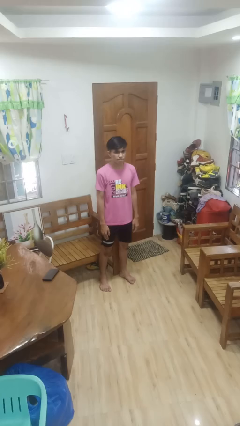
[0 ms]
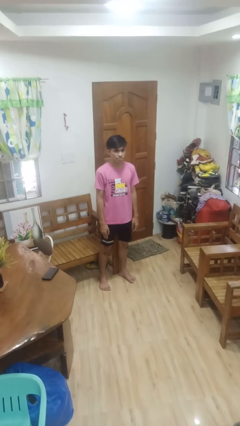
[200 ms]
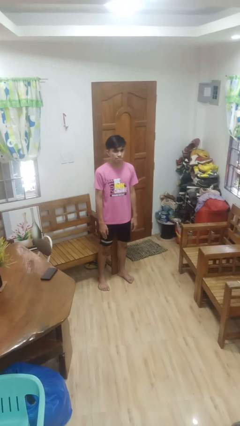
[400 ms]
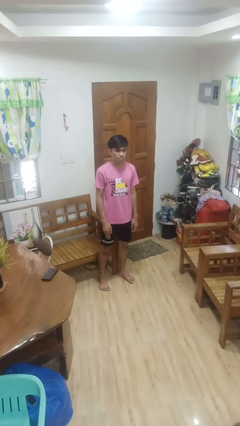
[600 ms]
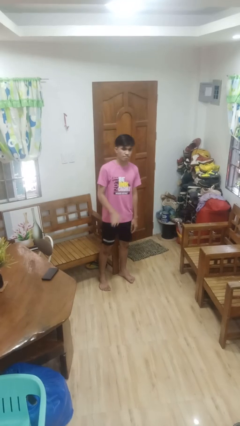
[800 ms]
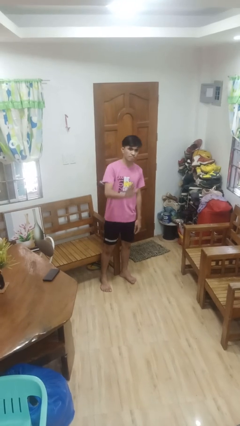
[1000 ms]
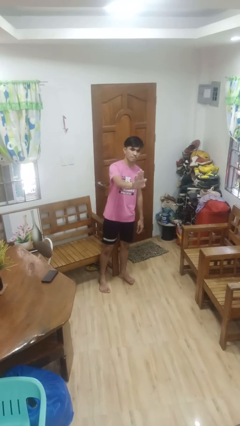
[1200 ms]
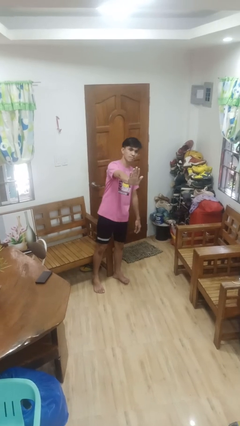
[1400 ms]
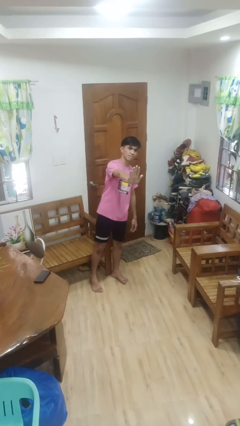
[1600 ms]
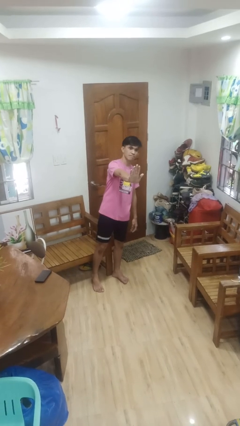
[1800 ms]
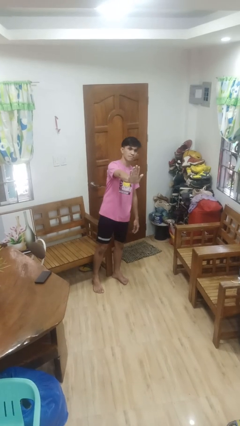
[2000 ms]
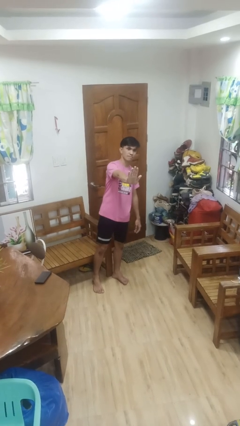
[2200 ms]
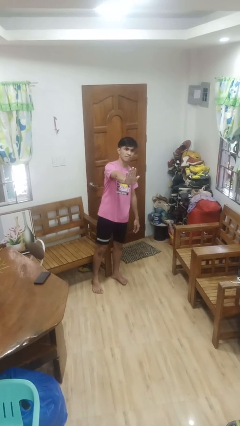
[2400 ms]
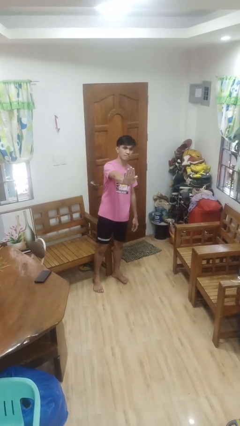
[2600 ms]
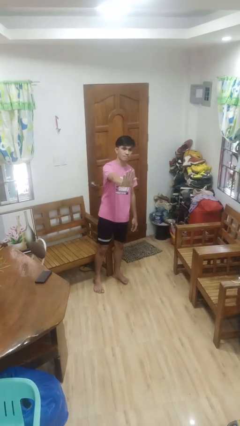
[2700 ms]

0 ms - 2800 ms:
person gestures stop

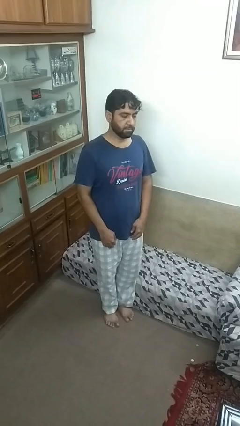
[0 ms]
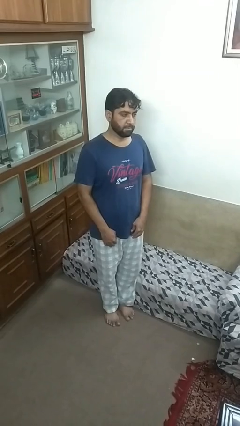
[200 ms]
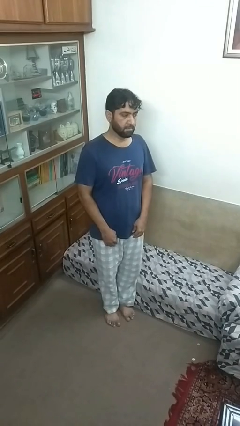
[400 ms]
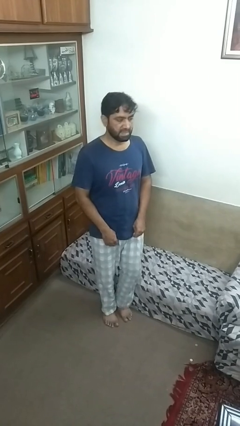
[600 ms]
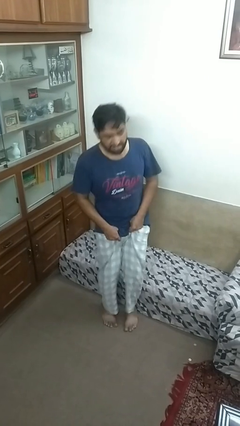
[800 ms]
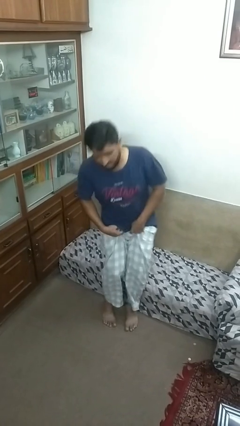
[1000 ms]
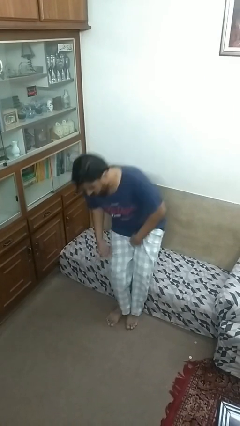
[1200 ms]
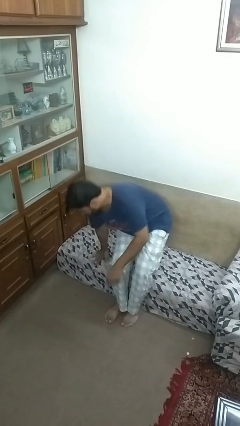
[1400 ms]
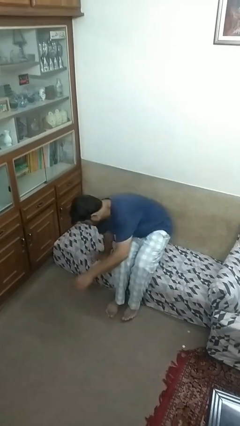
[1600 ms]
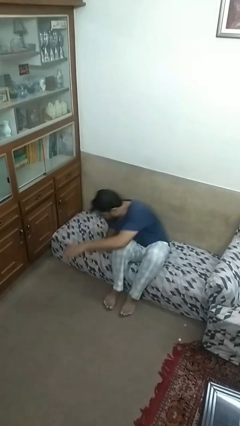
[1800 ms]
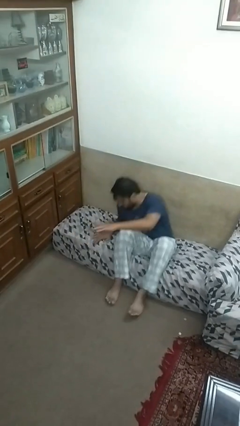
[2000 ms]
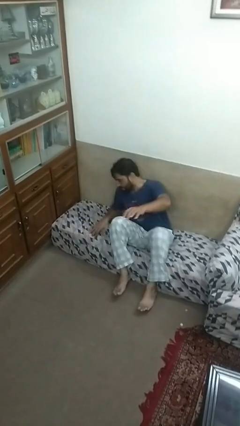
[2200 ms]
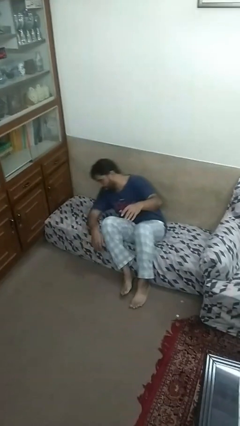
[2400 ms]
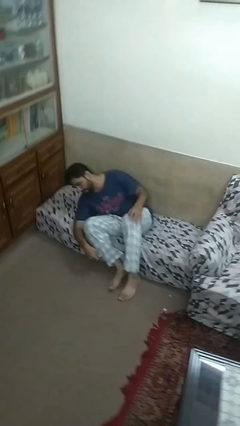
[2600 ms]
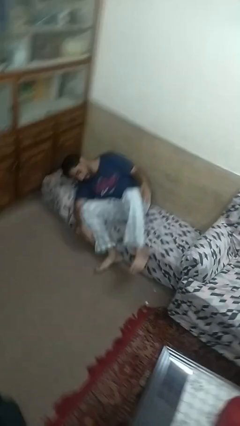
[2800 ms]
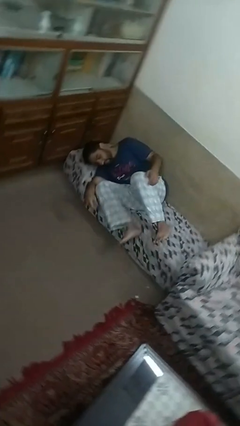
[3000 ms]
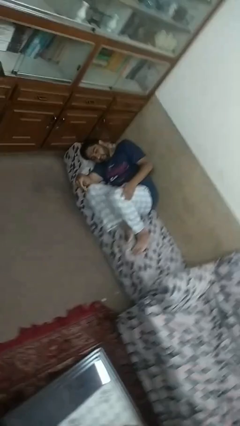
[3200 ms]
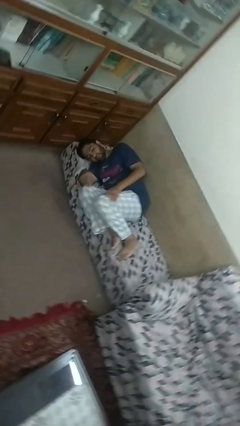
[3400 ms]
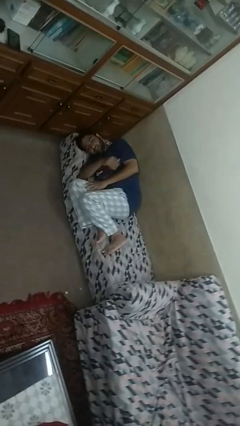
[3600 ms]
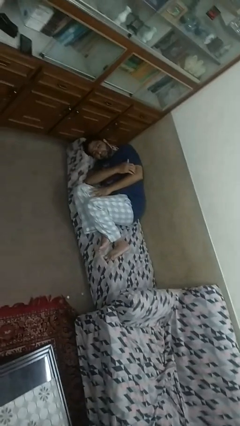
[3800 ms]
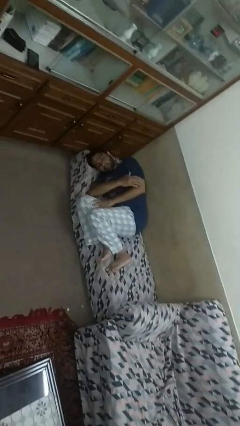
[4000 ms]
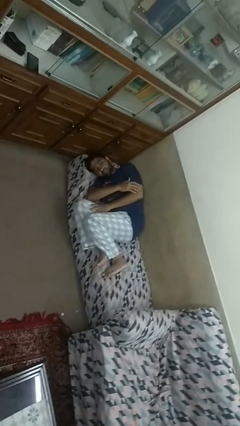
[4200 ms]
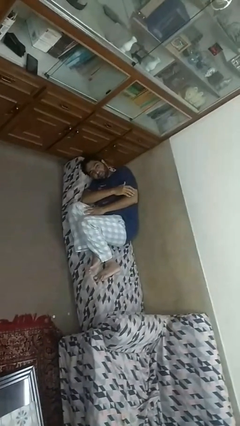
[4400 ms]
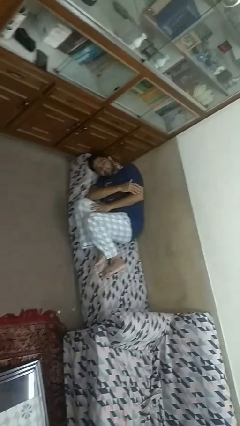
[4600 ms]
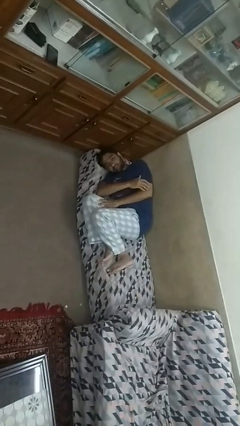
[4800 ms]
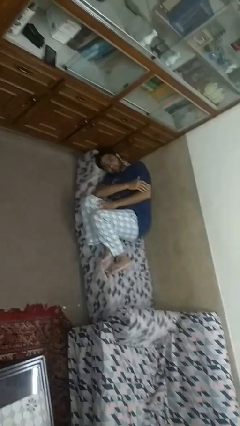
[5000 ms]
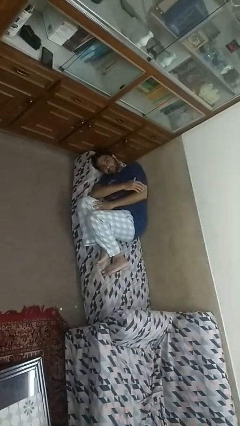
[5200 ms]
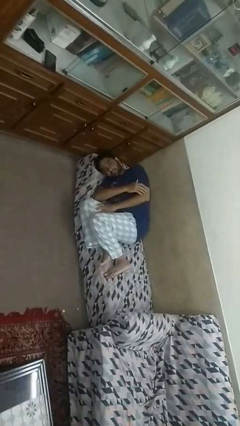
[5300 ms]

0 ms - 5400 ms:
person lies down on couch

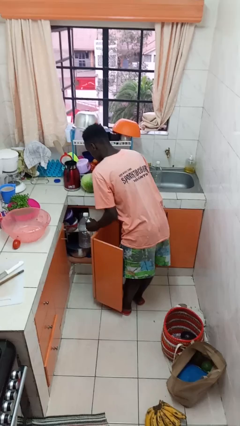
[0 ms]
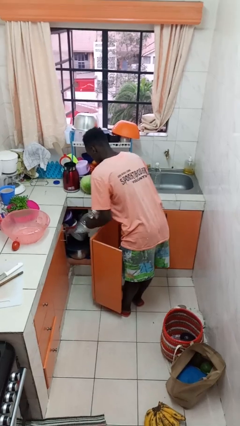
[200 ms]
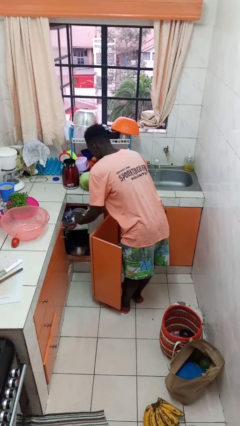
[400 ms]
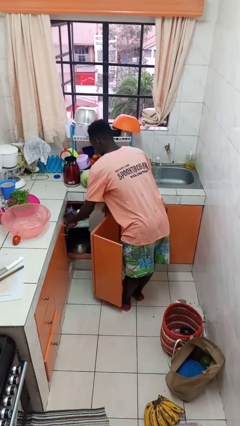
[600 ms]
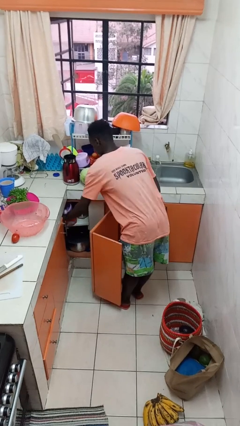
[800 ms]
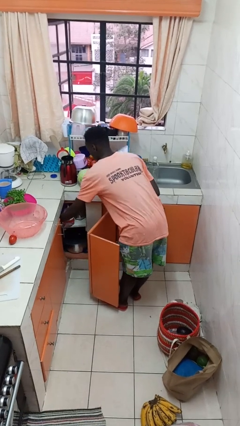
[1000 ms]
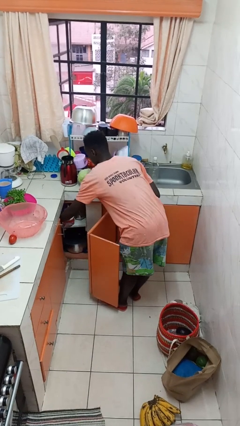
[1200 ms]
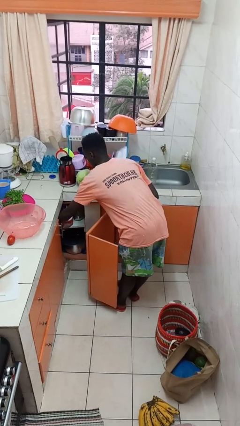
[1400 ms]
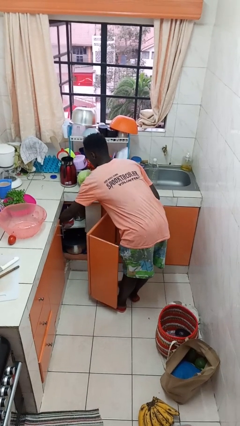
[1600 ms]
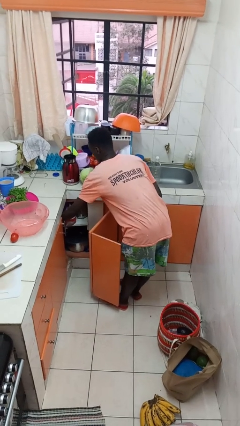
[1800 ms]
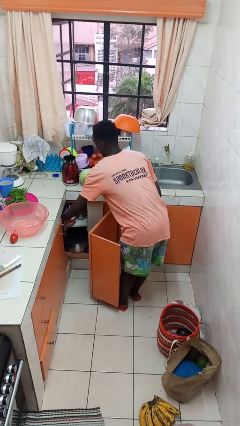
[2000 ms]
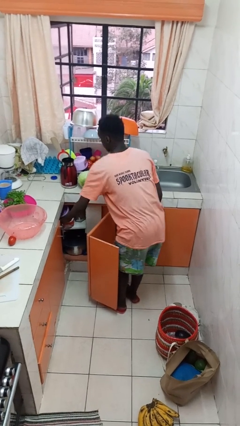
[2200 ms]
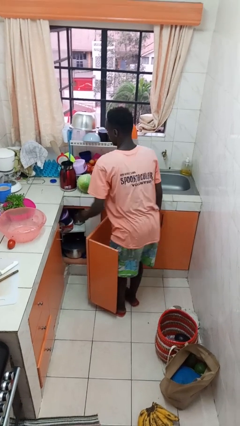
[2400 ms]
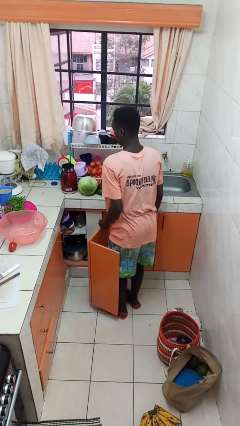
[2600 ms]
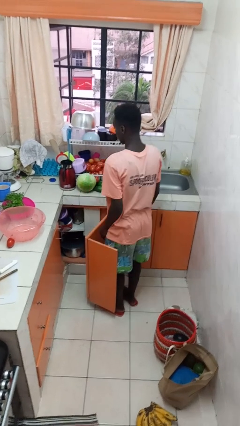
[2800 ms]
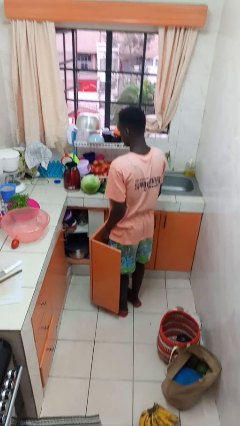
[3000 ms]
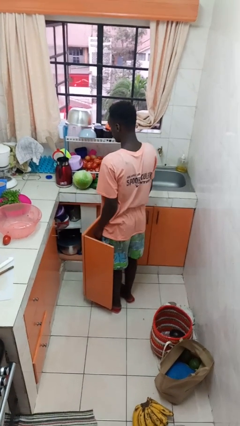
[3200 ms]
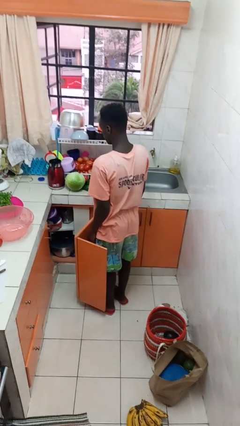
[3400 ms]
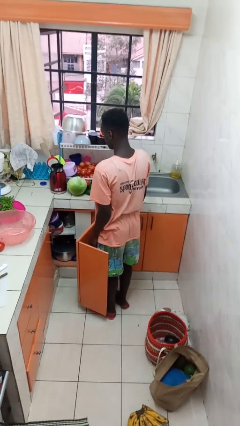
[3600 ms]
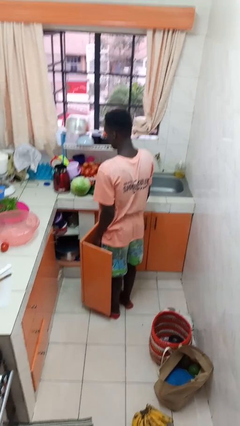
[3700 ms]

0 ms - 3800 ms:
person puts object in cabinet

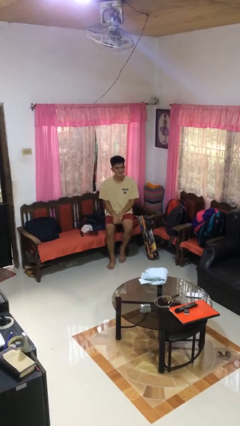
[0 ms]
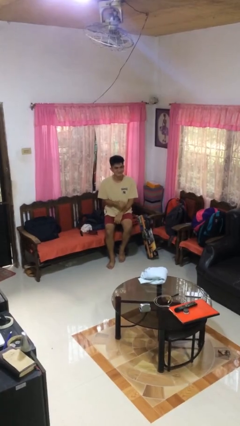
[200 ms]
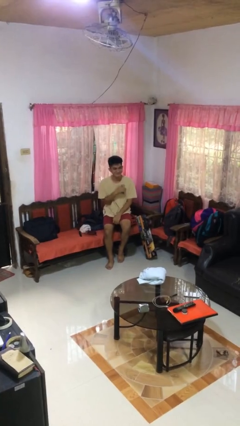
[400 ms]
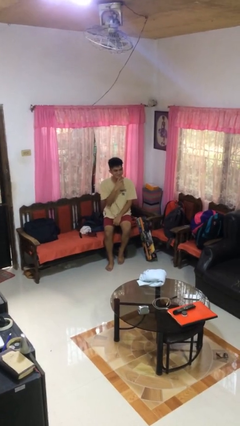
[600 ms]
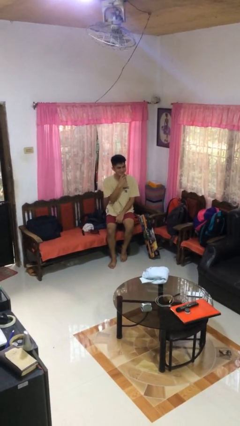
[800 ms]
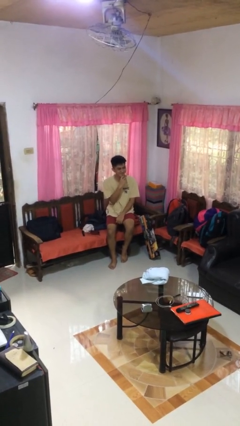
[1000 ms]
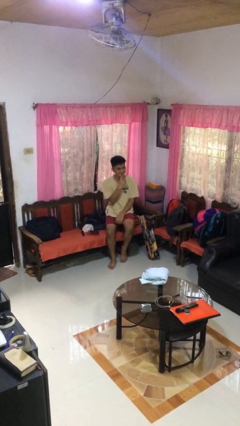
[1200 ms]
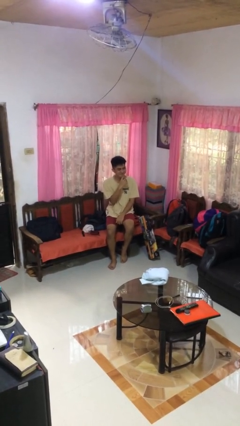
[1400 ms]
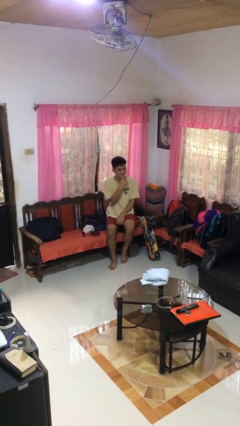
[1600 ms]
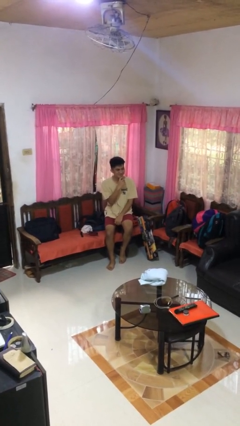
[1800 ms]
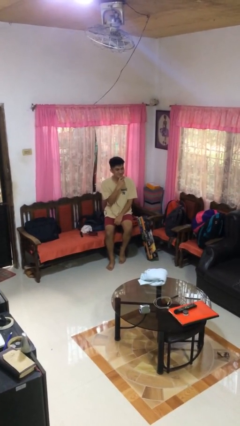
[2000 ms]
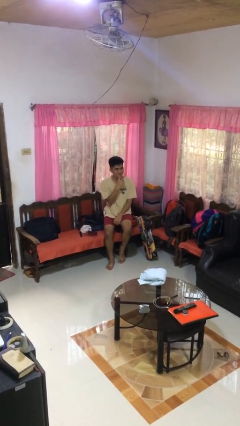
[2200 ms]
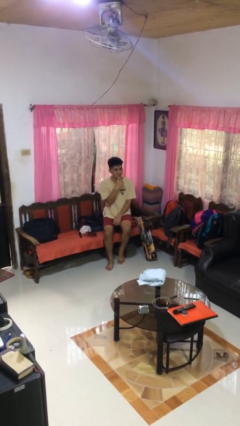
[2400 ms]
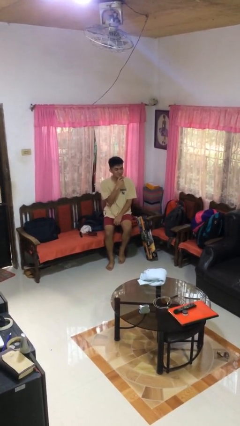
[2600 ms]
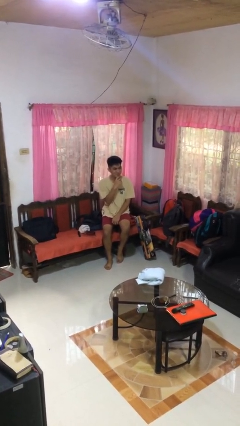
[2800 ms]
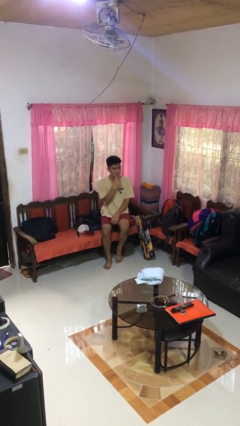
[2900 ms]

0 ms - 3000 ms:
person strokes chin

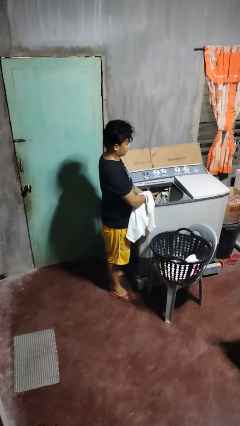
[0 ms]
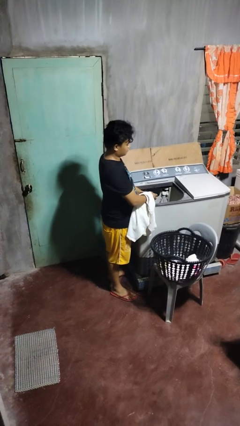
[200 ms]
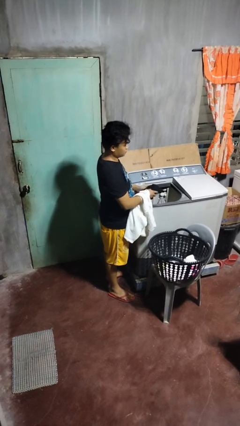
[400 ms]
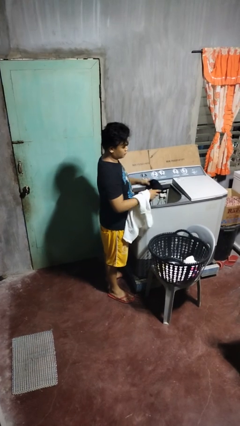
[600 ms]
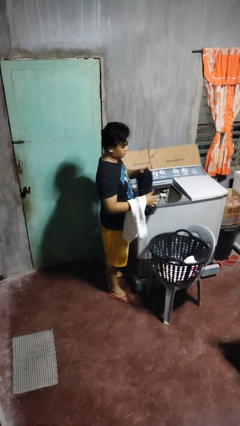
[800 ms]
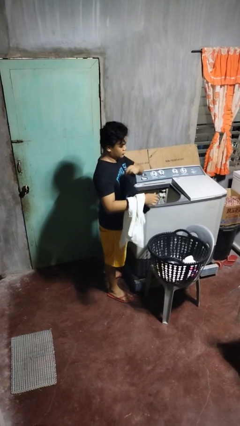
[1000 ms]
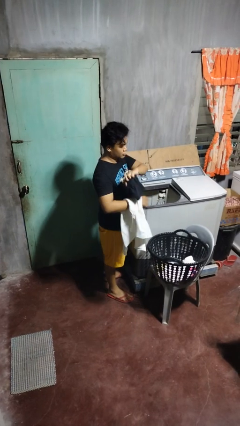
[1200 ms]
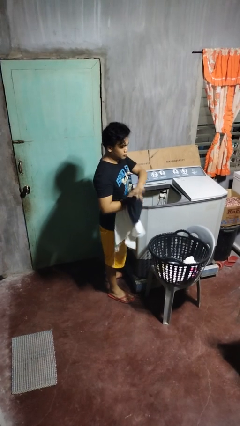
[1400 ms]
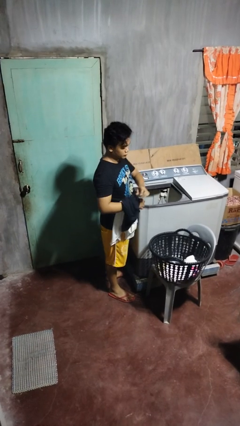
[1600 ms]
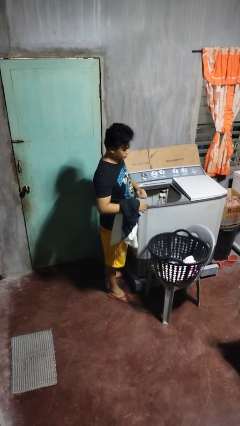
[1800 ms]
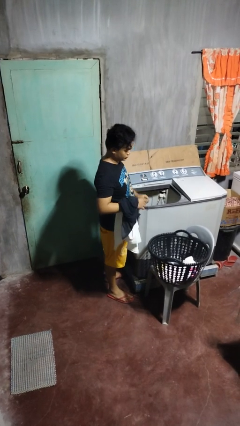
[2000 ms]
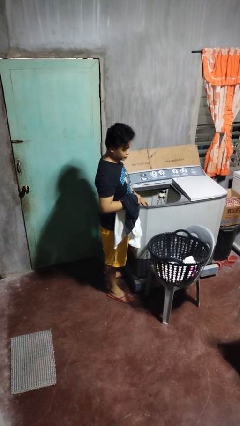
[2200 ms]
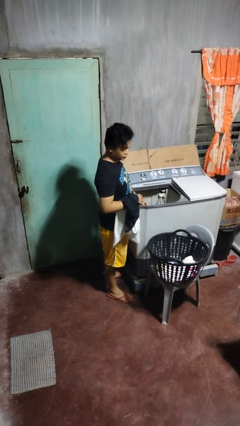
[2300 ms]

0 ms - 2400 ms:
person loads clotheswasher
